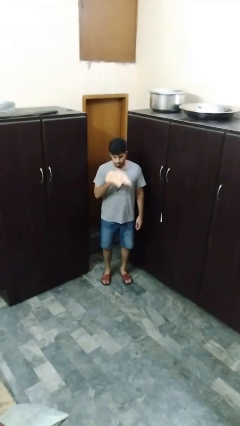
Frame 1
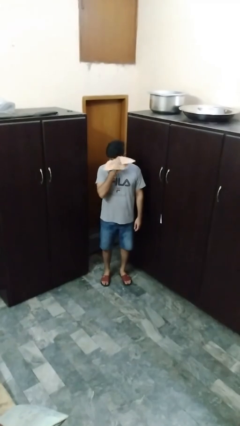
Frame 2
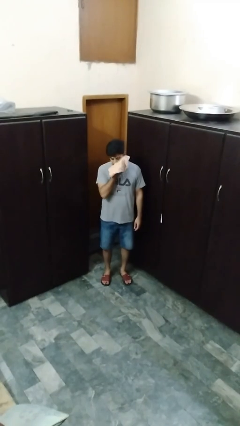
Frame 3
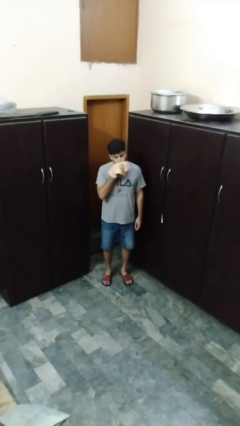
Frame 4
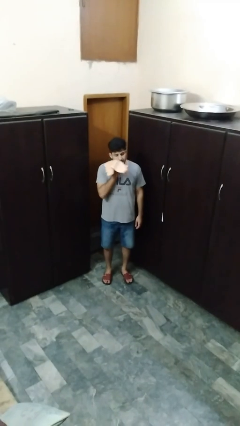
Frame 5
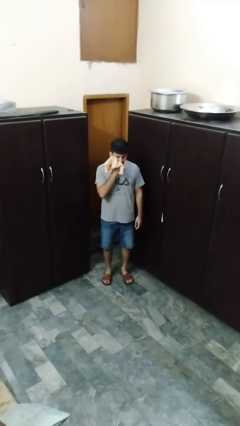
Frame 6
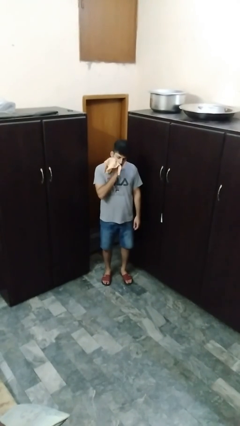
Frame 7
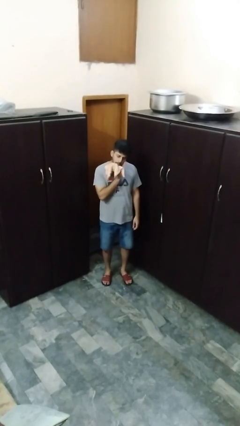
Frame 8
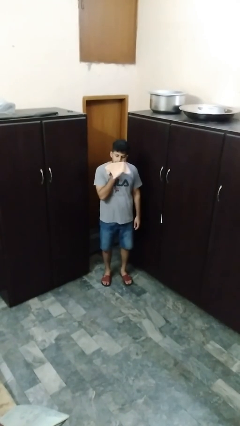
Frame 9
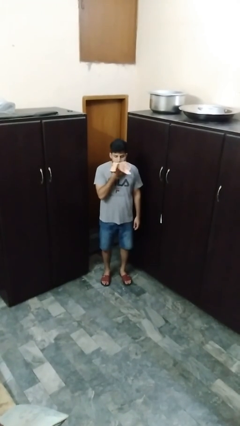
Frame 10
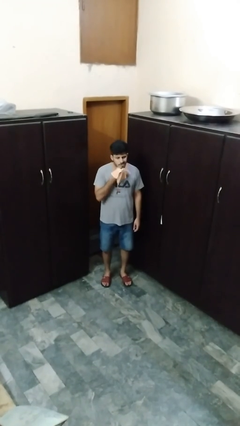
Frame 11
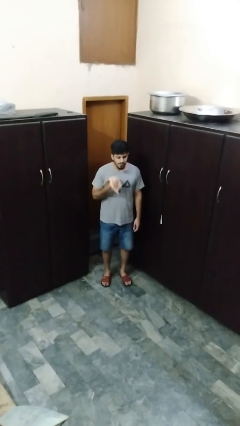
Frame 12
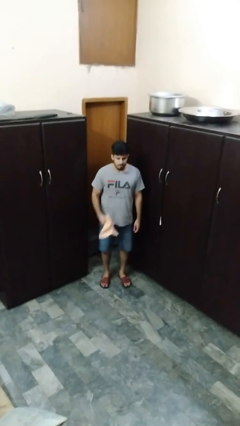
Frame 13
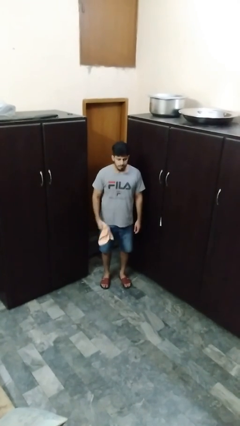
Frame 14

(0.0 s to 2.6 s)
person wipes mouth with napkin

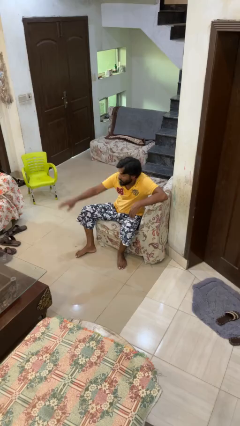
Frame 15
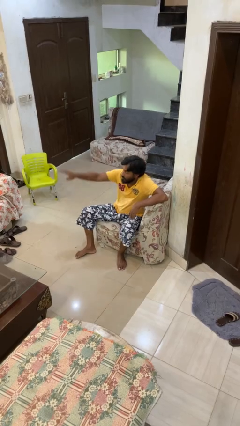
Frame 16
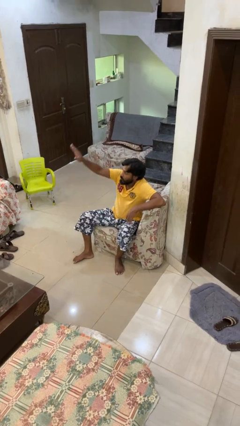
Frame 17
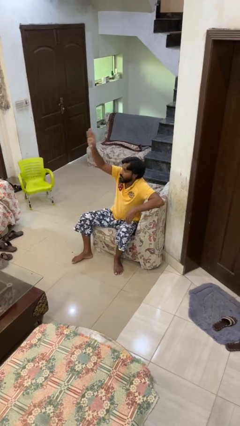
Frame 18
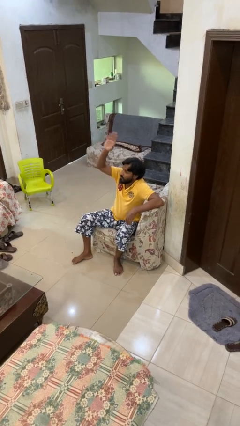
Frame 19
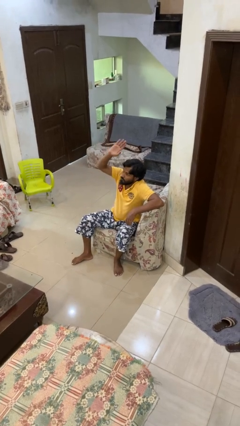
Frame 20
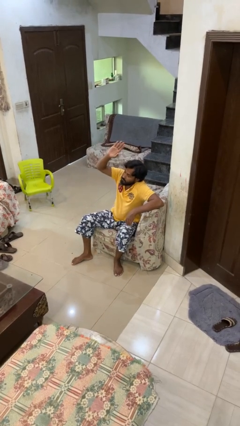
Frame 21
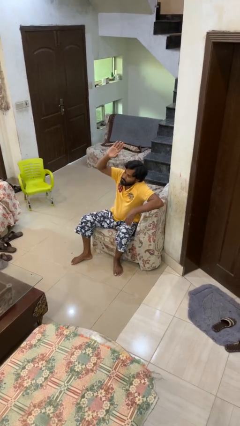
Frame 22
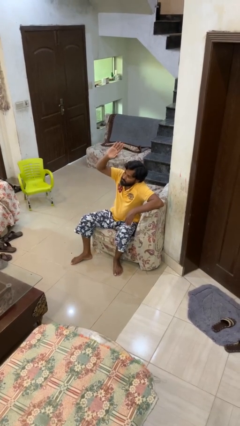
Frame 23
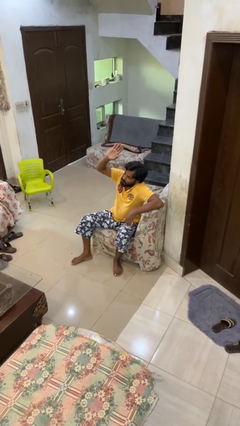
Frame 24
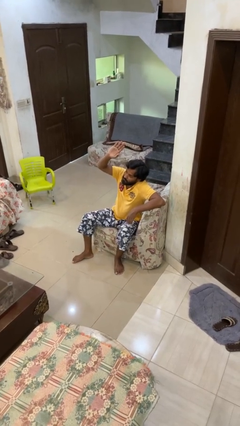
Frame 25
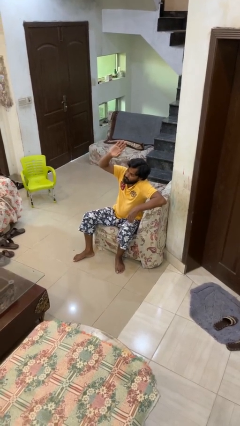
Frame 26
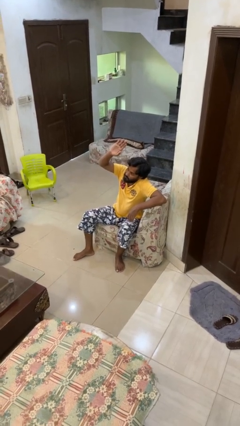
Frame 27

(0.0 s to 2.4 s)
person gestures raise hand

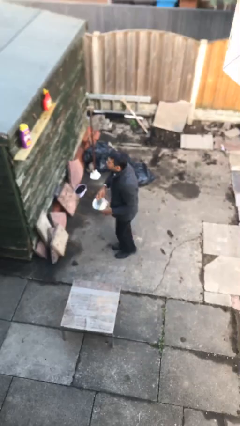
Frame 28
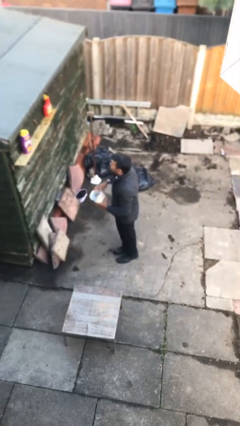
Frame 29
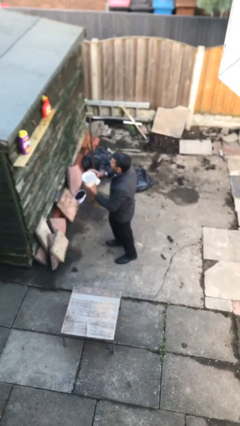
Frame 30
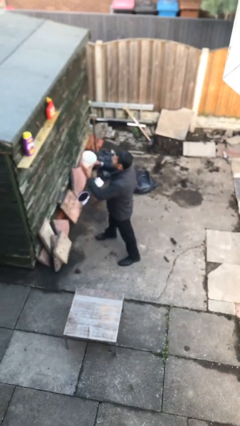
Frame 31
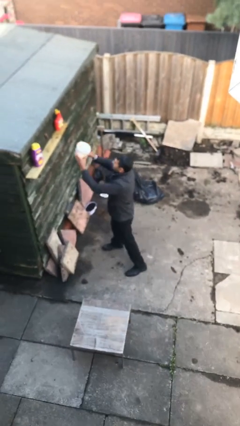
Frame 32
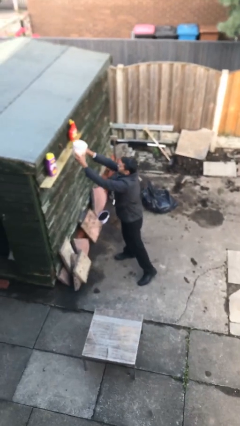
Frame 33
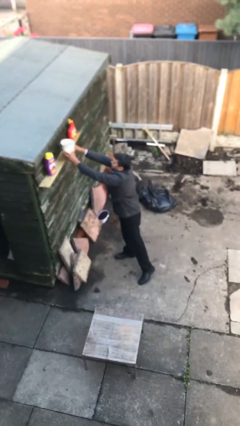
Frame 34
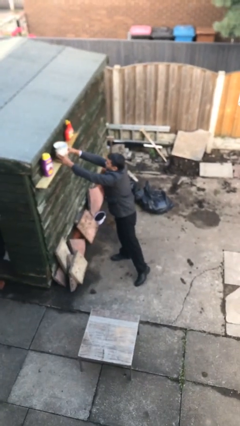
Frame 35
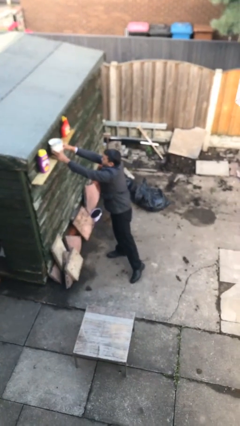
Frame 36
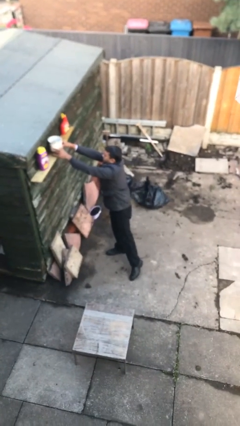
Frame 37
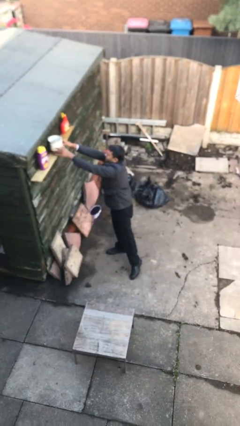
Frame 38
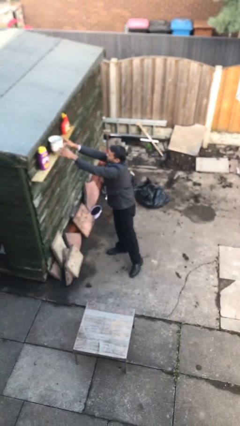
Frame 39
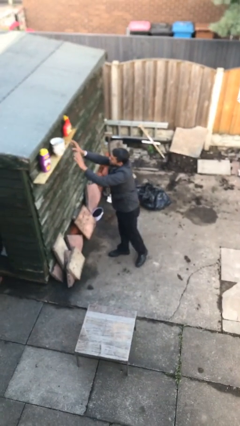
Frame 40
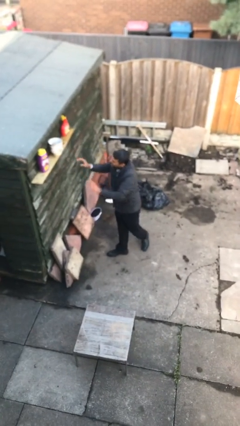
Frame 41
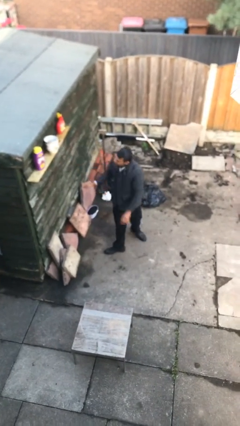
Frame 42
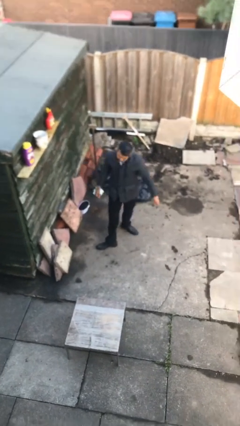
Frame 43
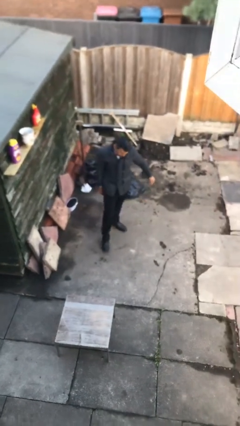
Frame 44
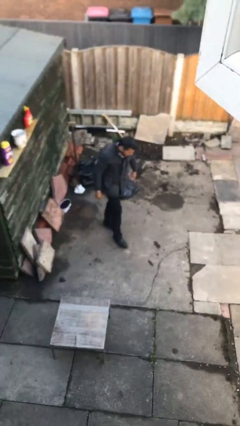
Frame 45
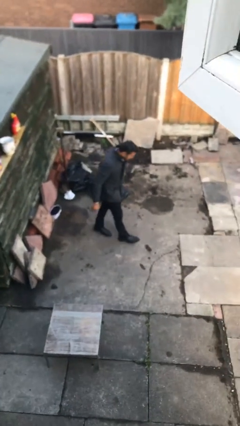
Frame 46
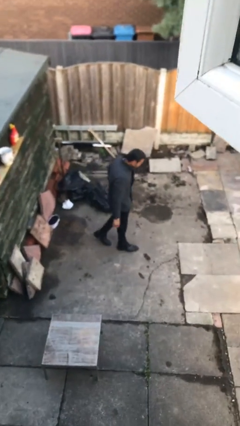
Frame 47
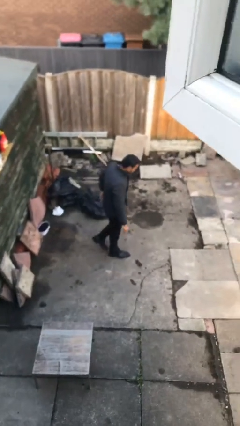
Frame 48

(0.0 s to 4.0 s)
person puts down object on shelf

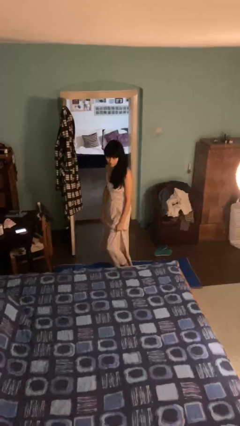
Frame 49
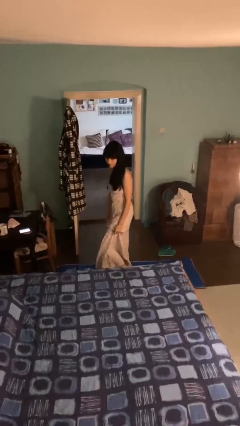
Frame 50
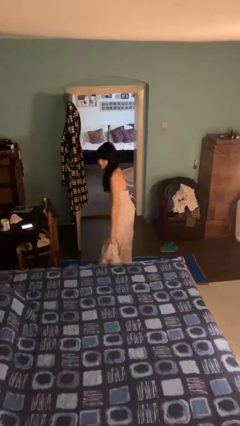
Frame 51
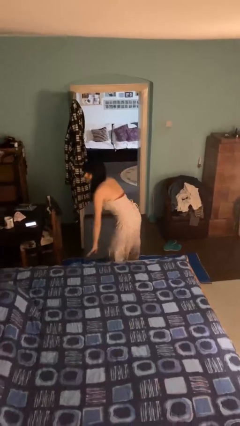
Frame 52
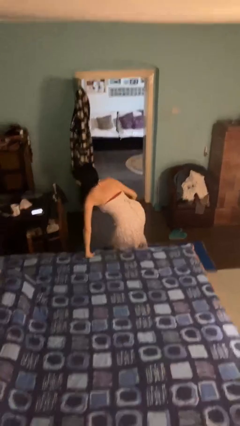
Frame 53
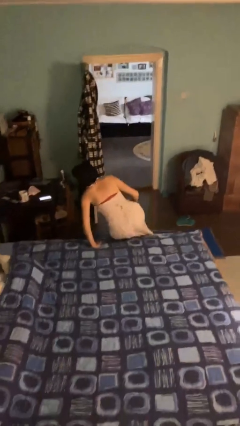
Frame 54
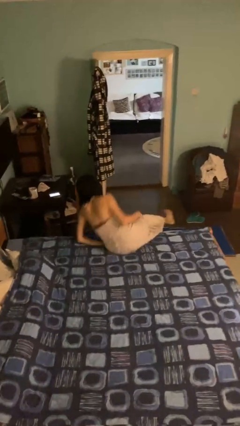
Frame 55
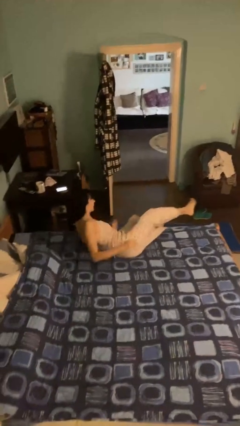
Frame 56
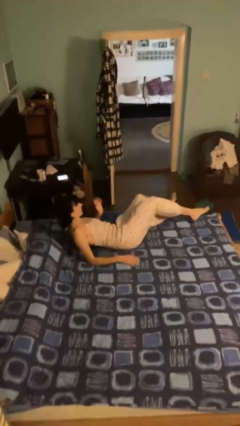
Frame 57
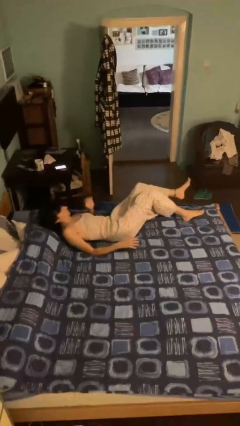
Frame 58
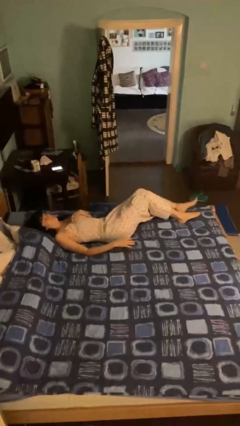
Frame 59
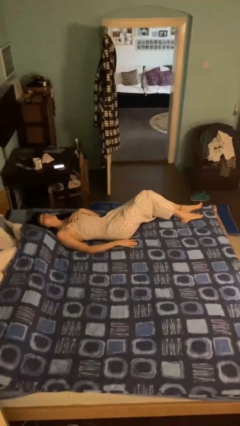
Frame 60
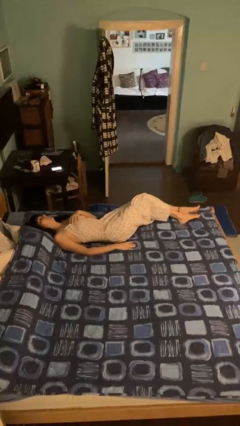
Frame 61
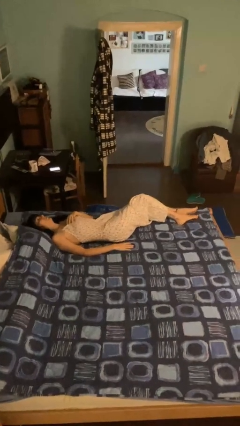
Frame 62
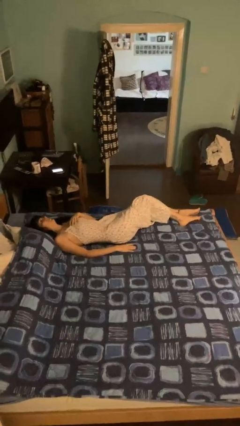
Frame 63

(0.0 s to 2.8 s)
person lies down on bed

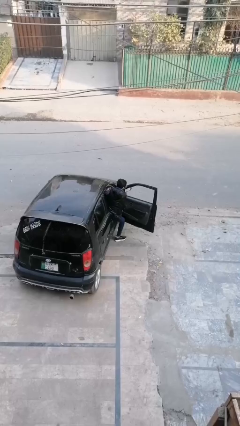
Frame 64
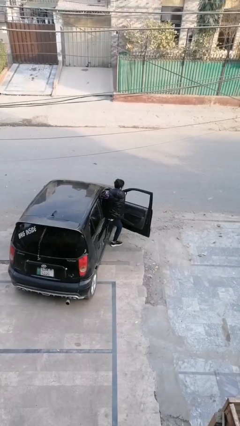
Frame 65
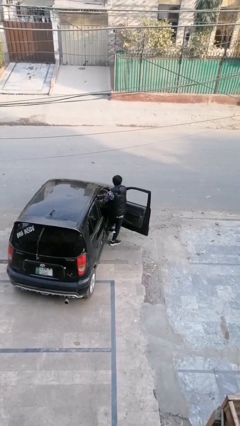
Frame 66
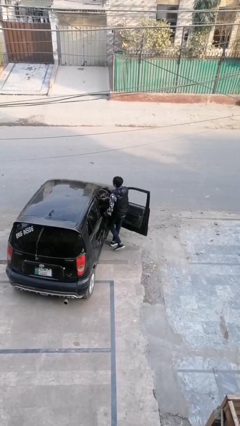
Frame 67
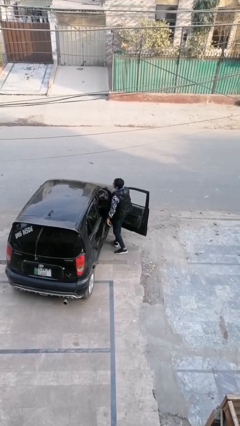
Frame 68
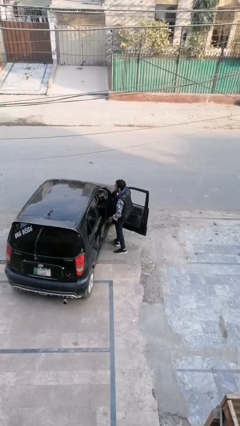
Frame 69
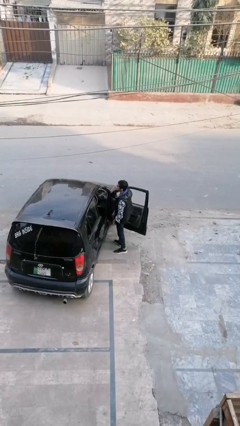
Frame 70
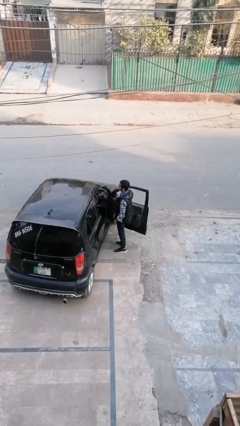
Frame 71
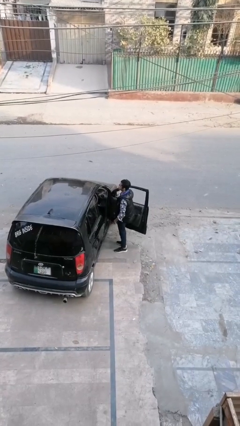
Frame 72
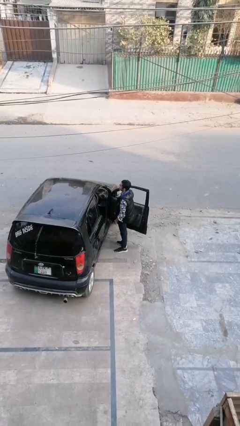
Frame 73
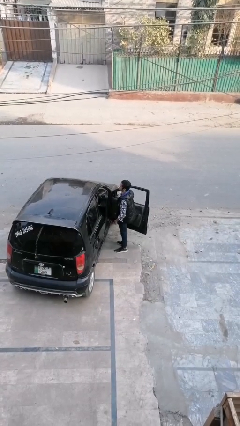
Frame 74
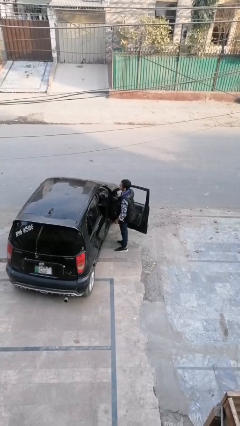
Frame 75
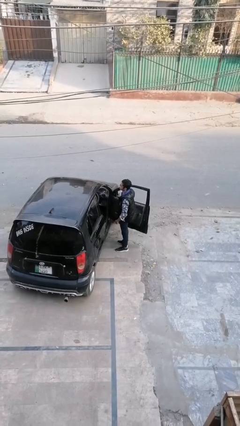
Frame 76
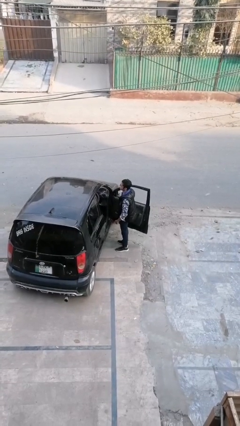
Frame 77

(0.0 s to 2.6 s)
person exits car

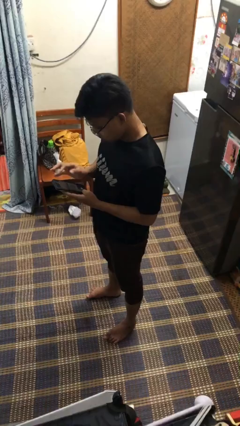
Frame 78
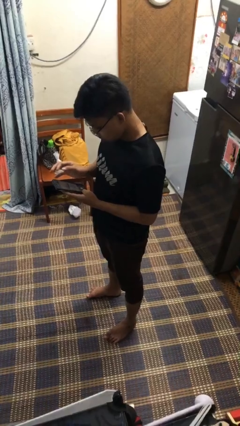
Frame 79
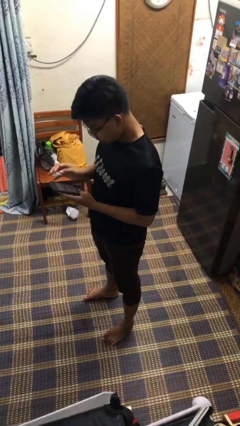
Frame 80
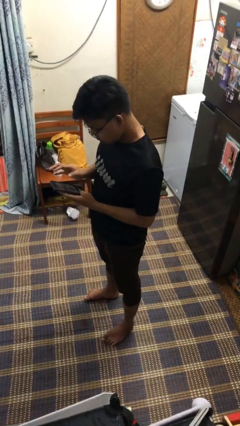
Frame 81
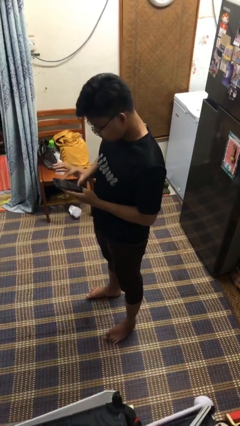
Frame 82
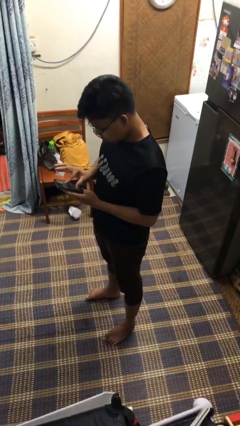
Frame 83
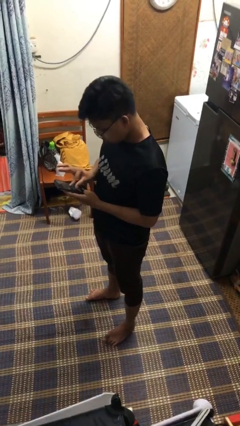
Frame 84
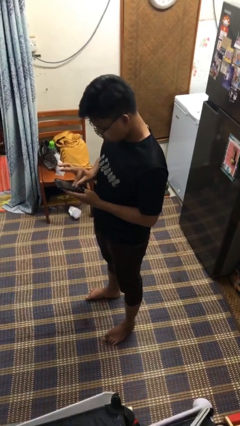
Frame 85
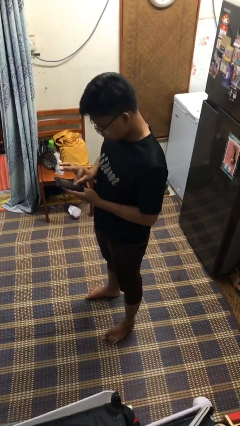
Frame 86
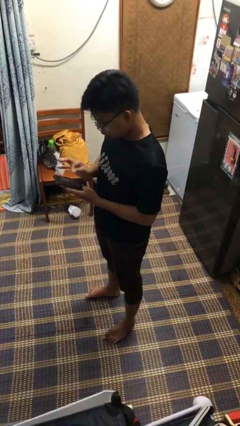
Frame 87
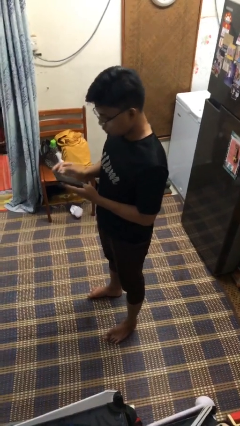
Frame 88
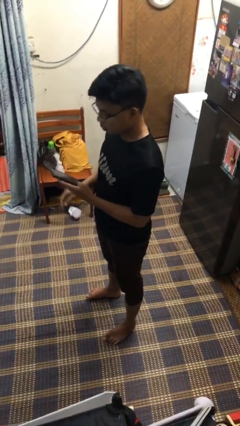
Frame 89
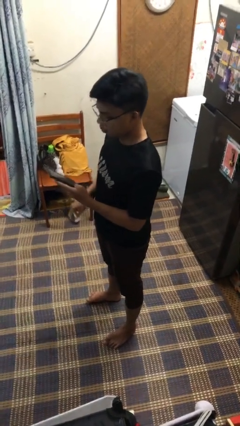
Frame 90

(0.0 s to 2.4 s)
person gestures zoom out

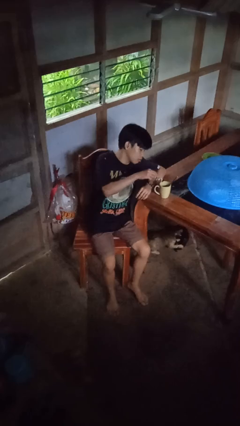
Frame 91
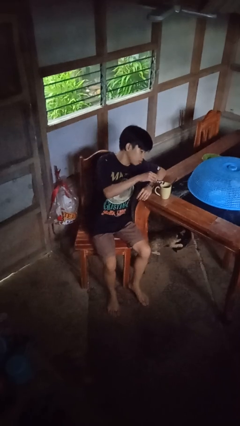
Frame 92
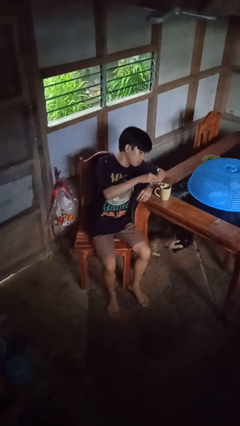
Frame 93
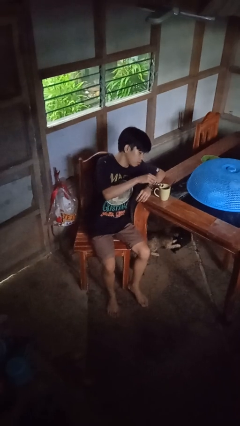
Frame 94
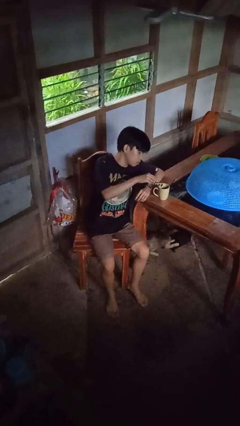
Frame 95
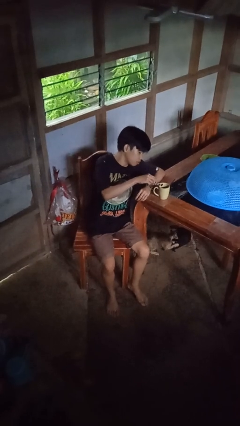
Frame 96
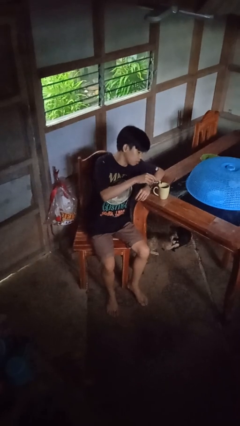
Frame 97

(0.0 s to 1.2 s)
person pours coffee into mug
